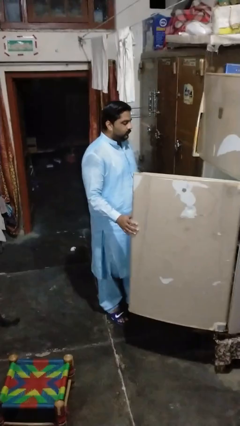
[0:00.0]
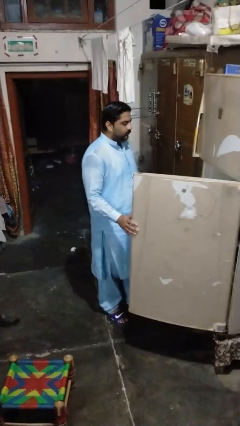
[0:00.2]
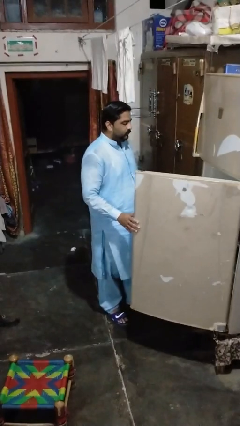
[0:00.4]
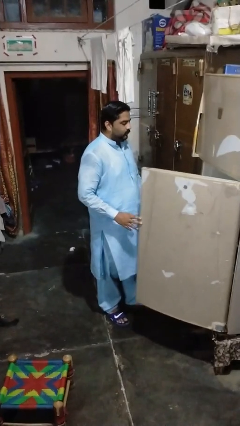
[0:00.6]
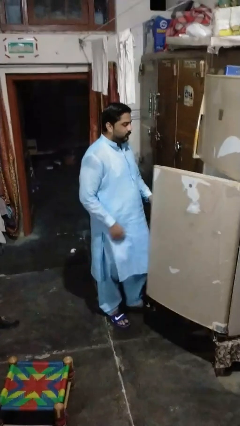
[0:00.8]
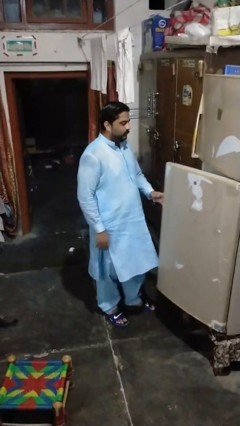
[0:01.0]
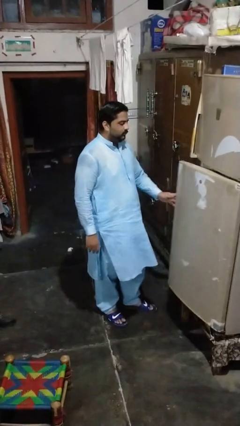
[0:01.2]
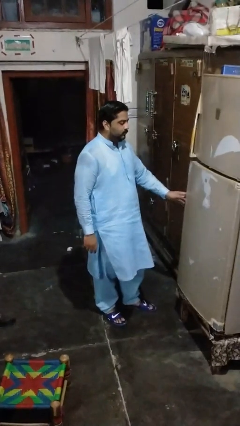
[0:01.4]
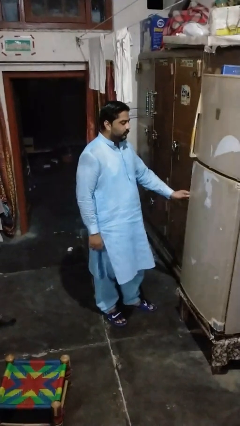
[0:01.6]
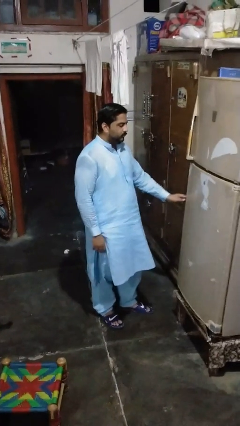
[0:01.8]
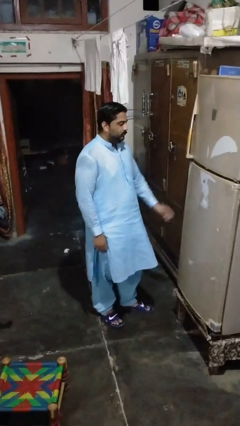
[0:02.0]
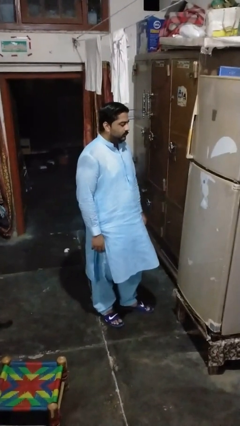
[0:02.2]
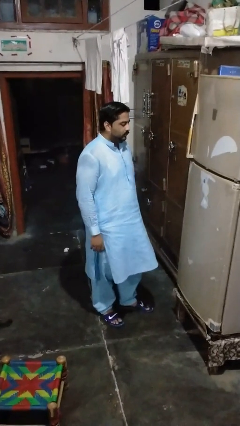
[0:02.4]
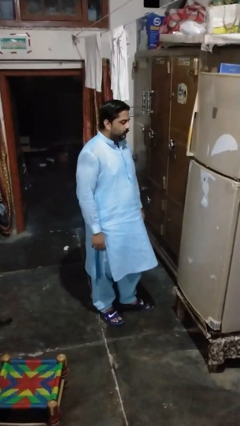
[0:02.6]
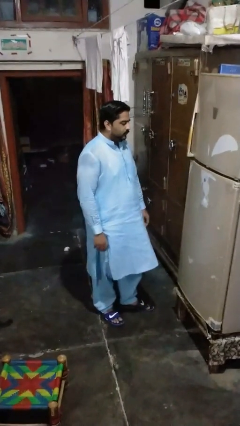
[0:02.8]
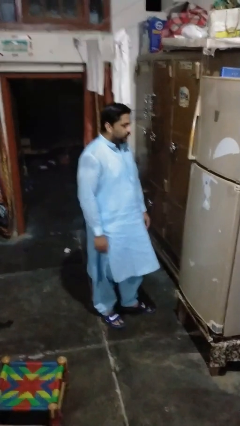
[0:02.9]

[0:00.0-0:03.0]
person closes refrigerator

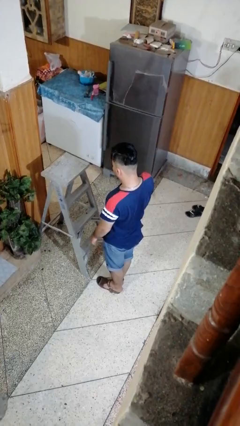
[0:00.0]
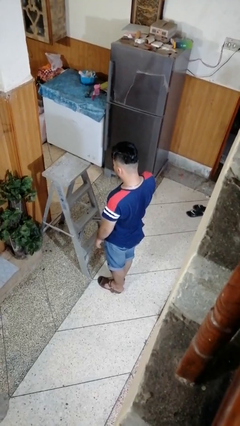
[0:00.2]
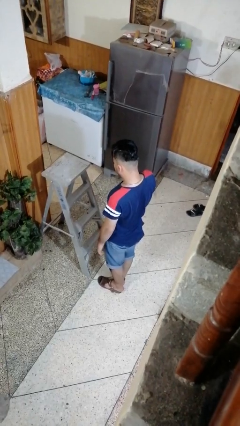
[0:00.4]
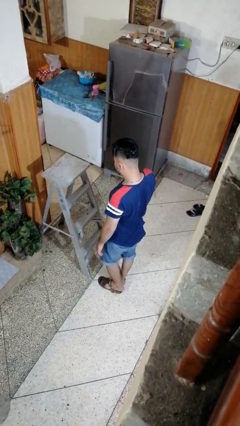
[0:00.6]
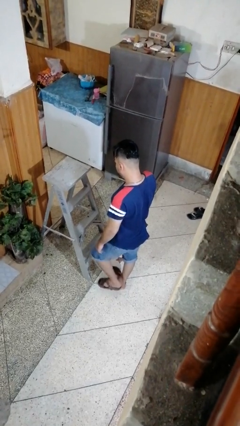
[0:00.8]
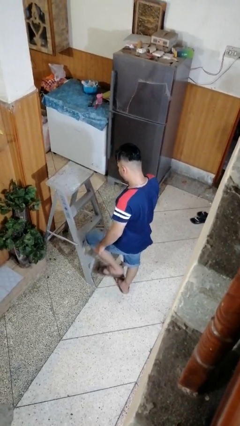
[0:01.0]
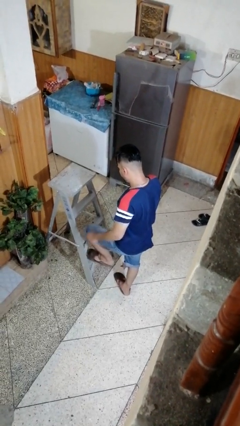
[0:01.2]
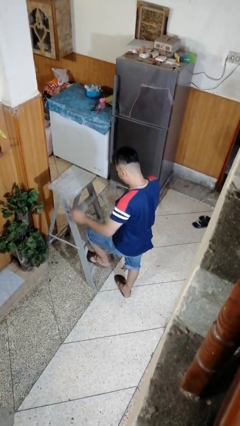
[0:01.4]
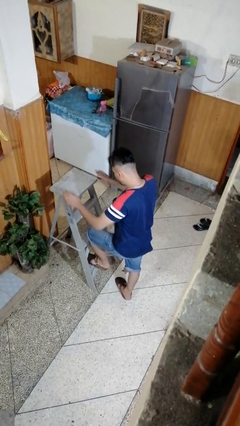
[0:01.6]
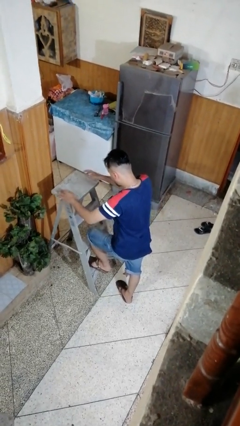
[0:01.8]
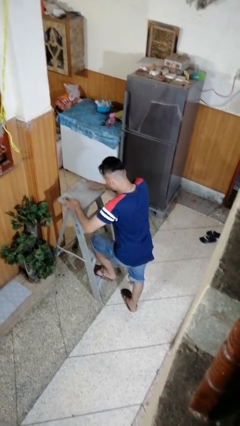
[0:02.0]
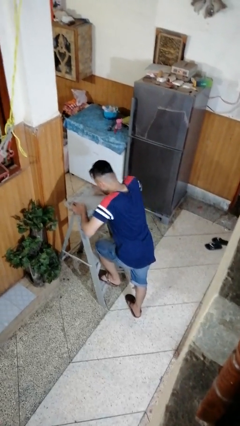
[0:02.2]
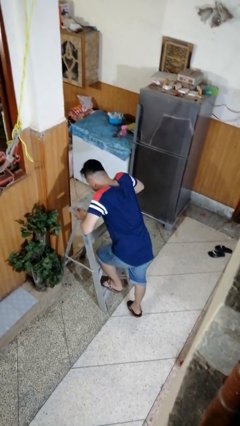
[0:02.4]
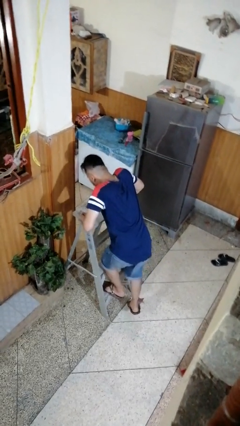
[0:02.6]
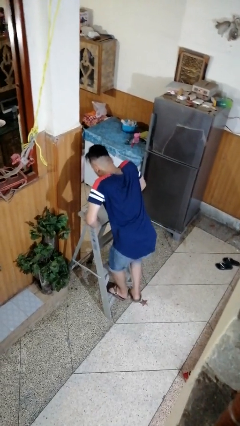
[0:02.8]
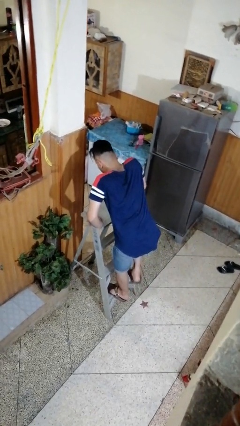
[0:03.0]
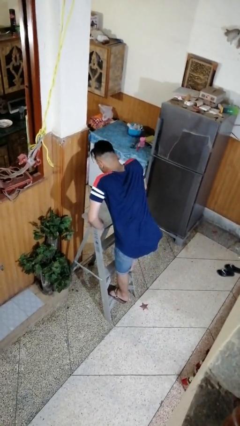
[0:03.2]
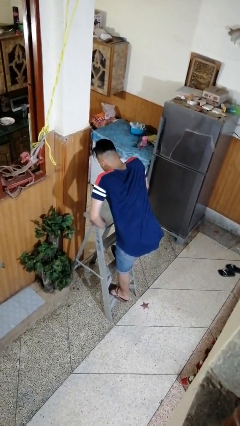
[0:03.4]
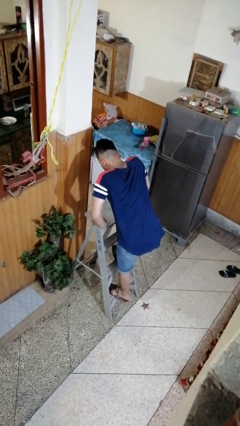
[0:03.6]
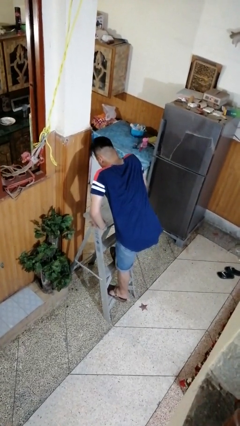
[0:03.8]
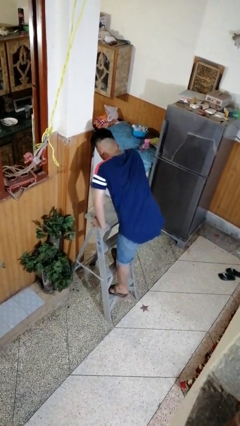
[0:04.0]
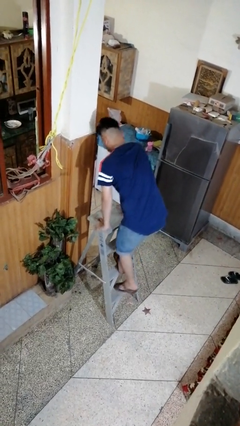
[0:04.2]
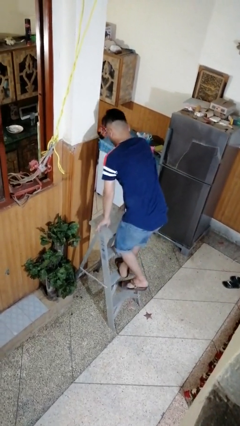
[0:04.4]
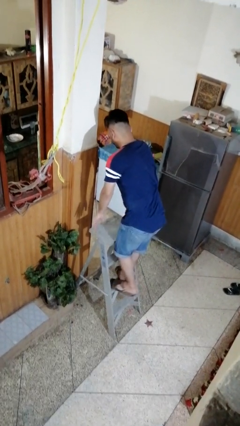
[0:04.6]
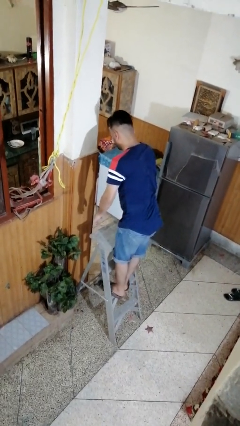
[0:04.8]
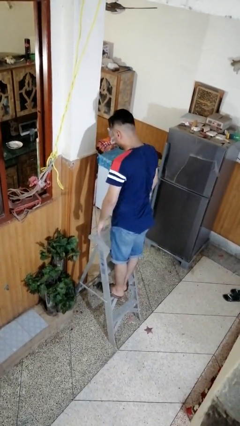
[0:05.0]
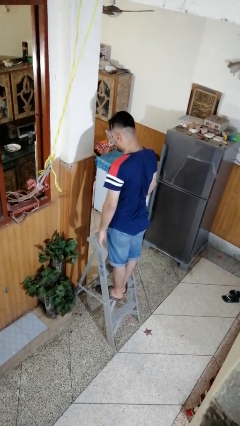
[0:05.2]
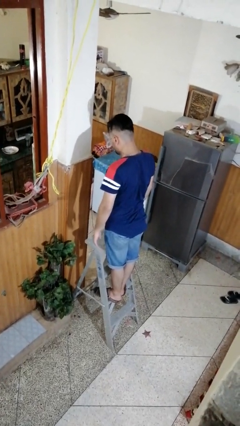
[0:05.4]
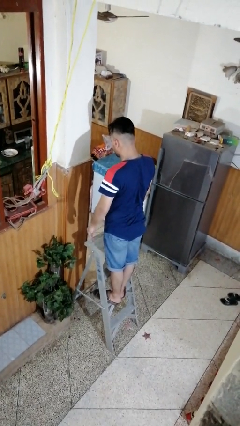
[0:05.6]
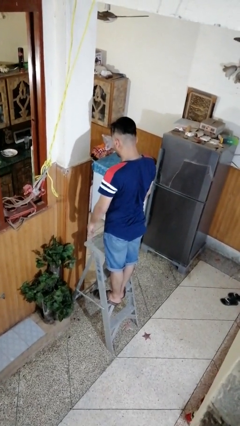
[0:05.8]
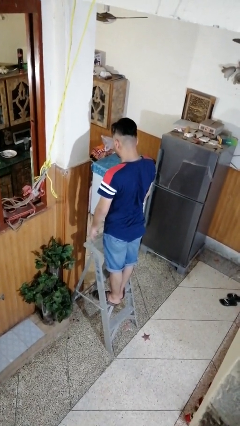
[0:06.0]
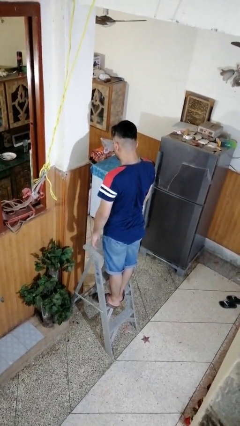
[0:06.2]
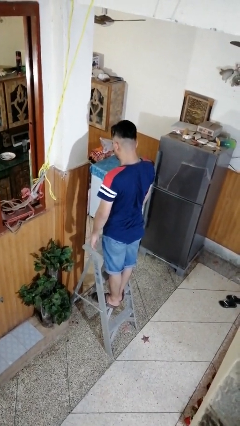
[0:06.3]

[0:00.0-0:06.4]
person climbs up ladder

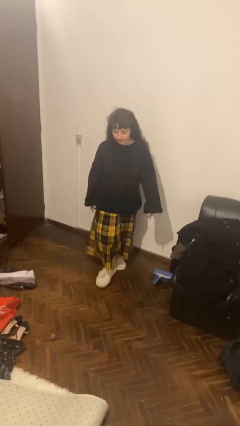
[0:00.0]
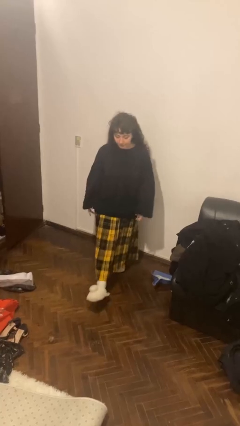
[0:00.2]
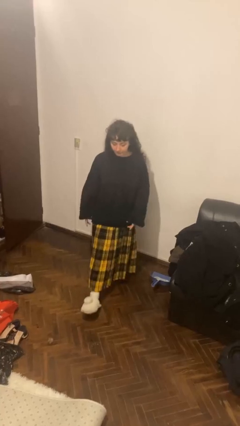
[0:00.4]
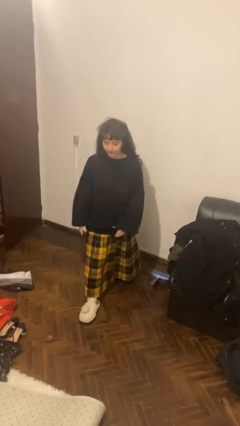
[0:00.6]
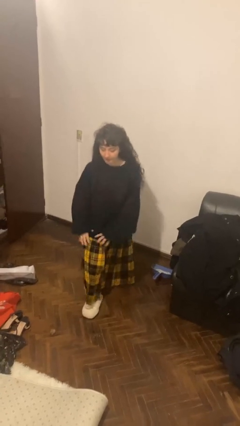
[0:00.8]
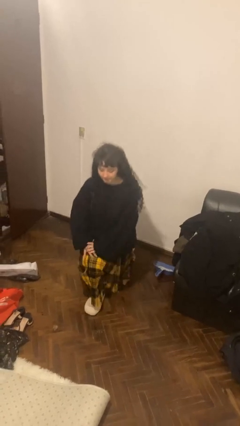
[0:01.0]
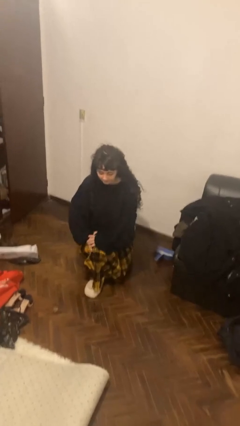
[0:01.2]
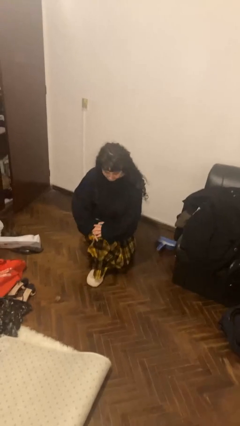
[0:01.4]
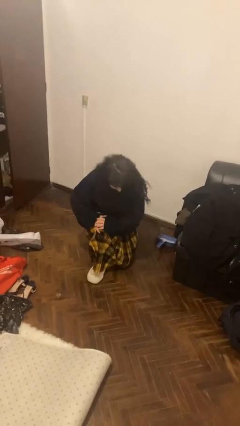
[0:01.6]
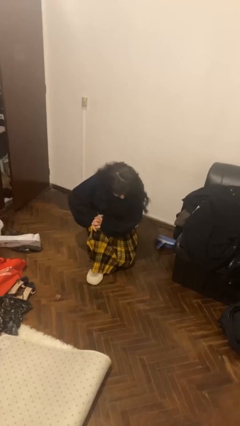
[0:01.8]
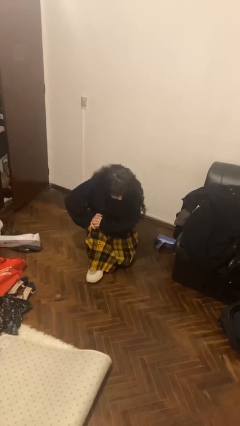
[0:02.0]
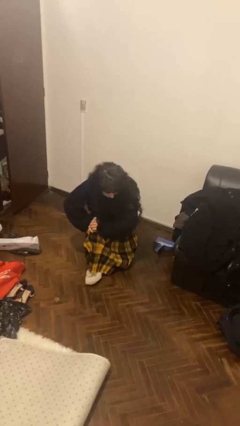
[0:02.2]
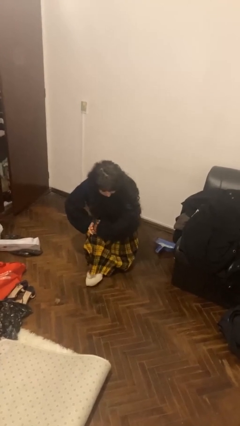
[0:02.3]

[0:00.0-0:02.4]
person kneels

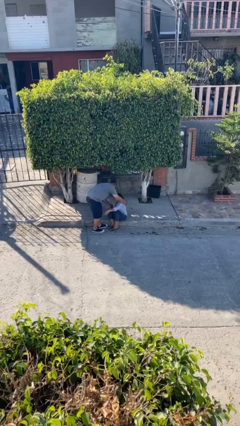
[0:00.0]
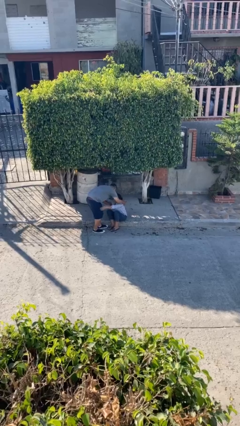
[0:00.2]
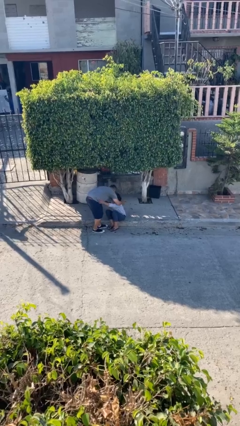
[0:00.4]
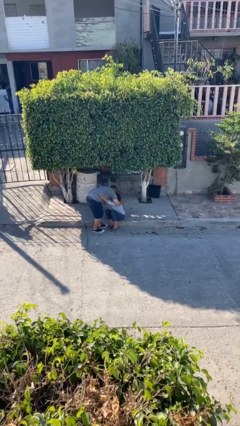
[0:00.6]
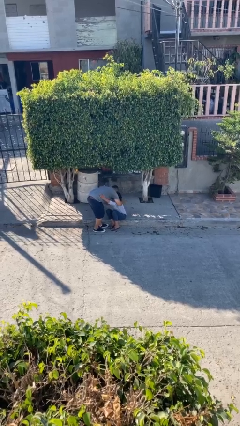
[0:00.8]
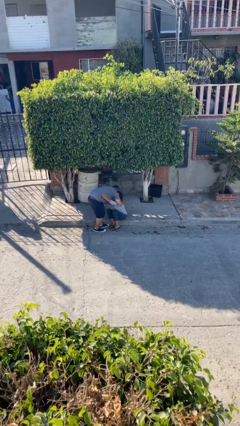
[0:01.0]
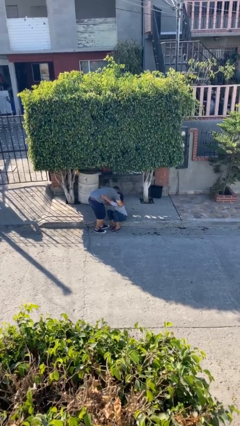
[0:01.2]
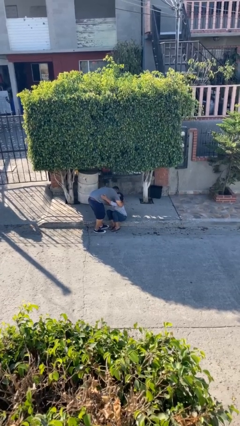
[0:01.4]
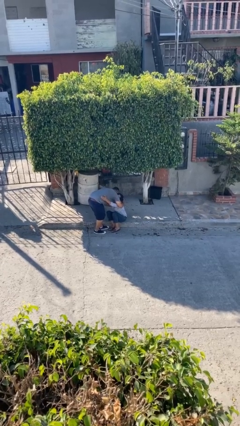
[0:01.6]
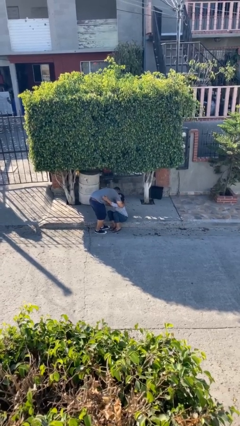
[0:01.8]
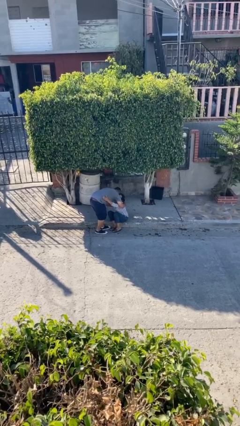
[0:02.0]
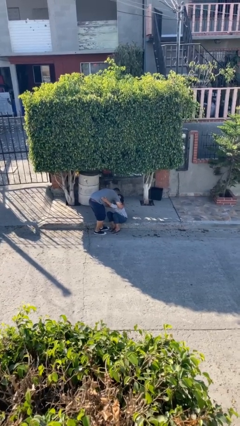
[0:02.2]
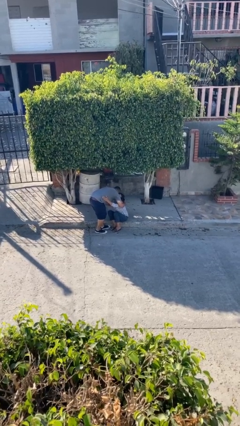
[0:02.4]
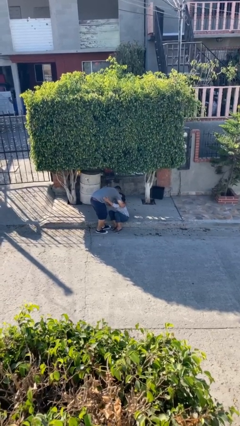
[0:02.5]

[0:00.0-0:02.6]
person embraces person

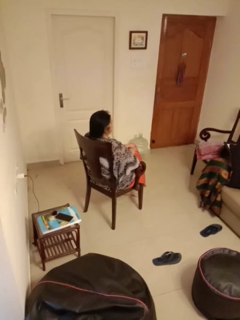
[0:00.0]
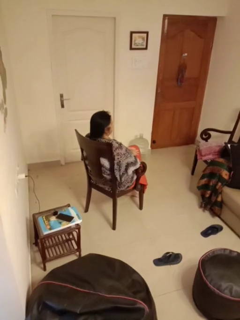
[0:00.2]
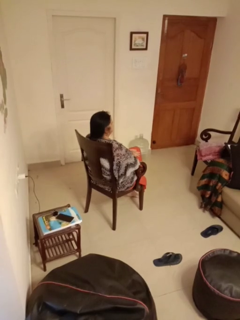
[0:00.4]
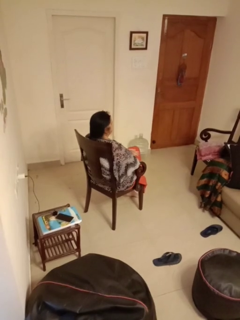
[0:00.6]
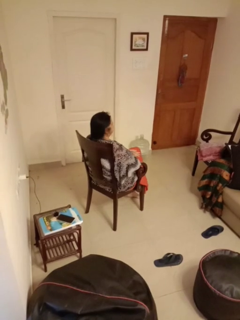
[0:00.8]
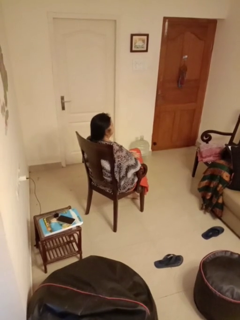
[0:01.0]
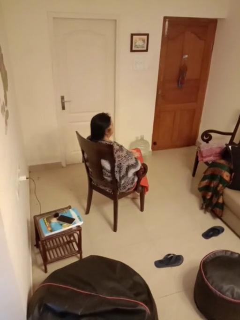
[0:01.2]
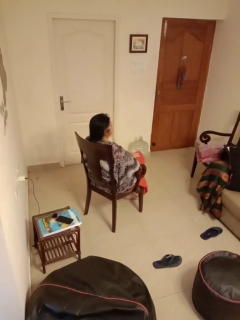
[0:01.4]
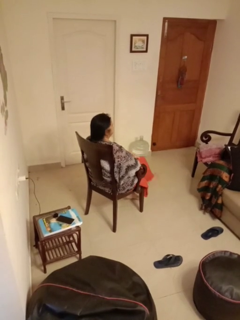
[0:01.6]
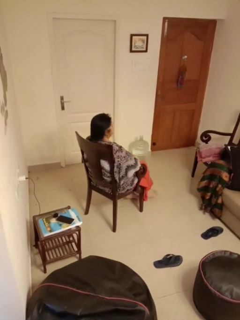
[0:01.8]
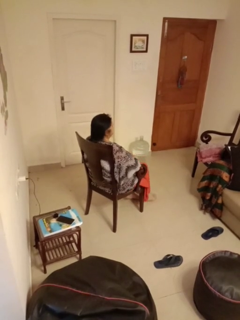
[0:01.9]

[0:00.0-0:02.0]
person crosses legs

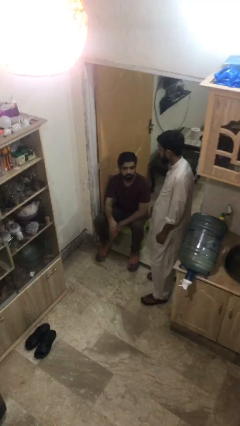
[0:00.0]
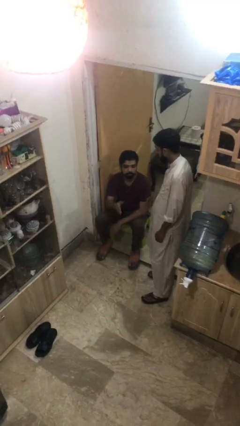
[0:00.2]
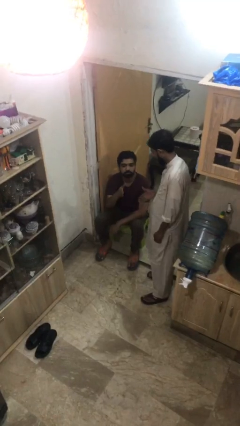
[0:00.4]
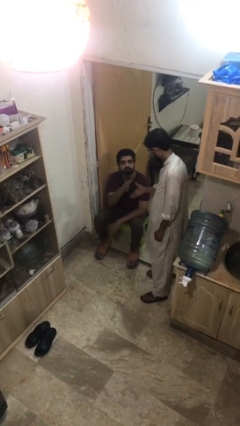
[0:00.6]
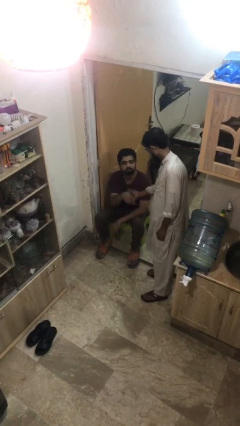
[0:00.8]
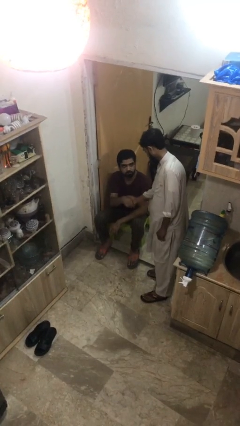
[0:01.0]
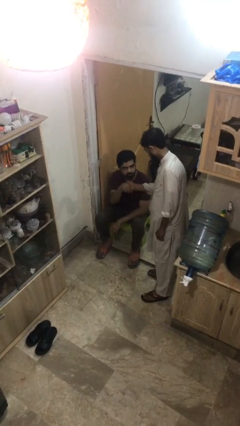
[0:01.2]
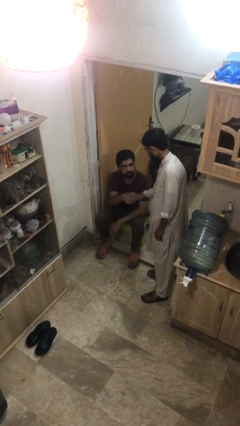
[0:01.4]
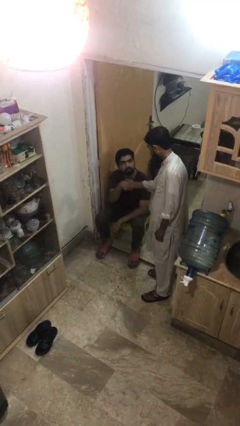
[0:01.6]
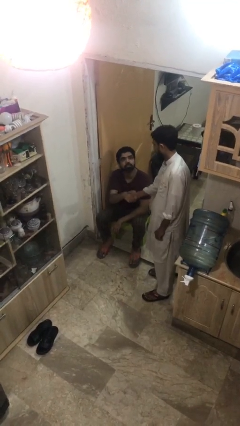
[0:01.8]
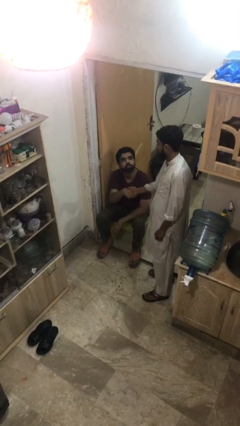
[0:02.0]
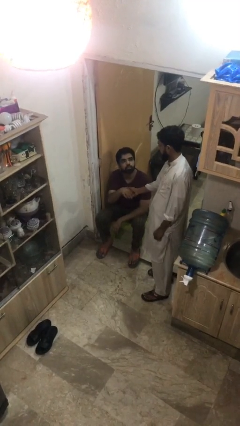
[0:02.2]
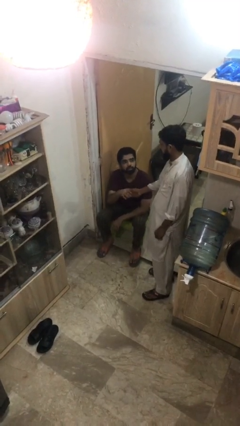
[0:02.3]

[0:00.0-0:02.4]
person shakes hand
